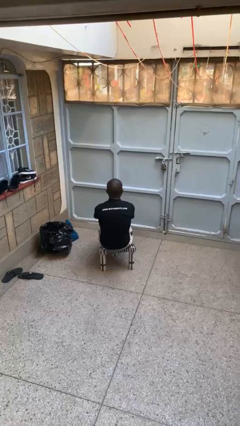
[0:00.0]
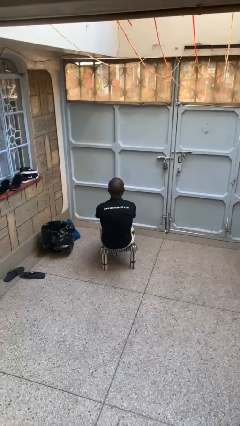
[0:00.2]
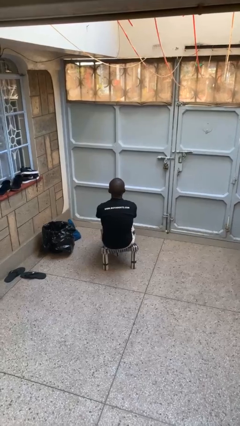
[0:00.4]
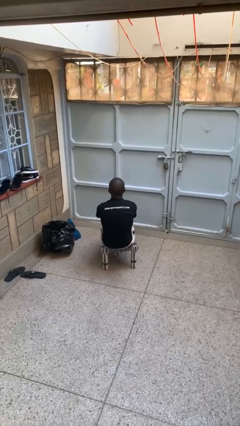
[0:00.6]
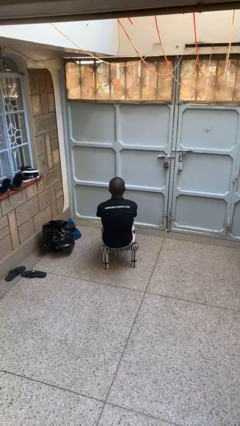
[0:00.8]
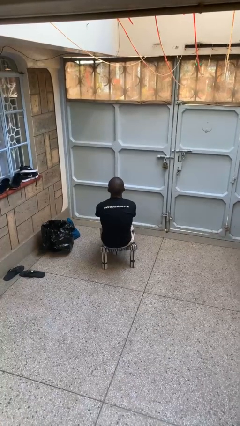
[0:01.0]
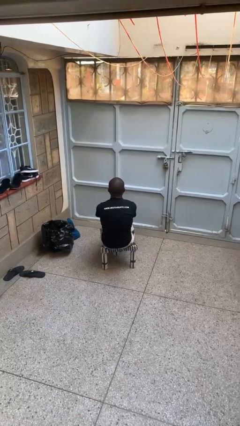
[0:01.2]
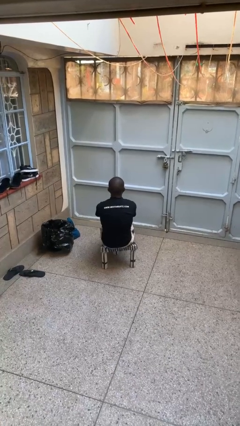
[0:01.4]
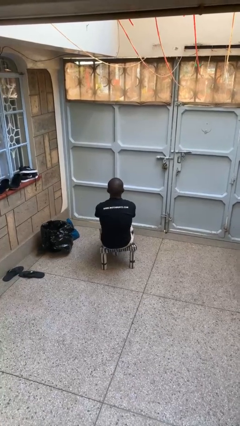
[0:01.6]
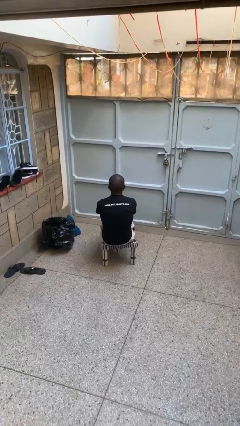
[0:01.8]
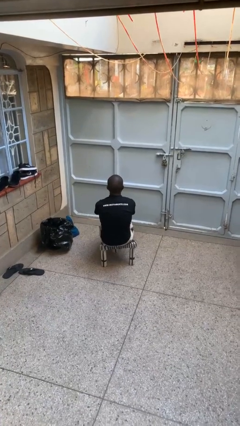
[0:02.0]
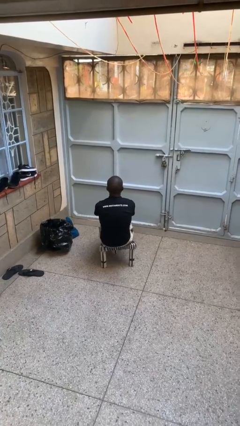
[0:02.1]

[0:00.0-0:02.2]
person nods head

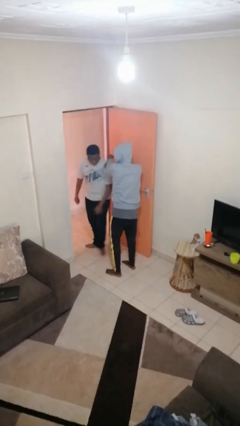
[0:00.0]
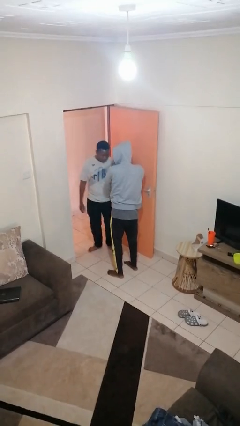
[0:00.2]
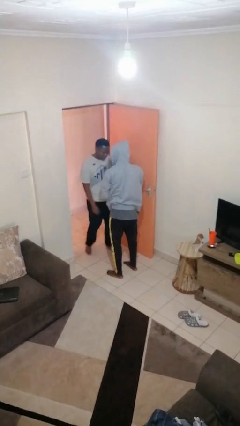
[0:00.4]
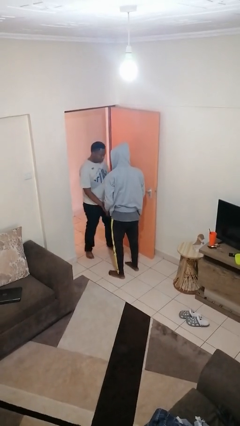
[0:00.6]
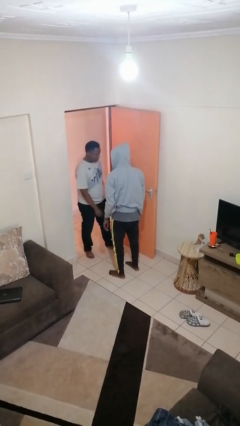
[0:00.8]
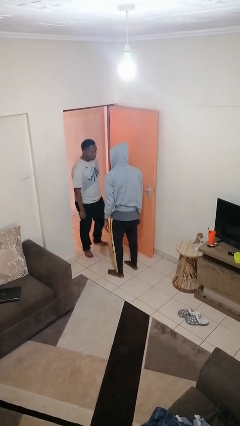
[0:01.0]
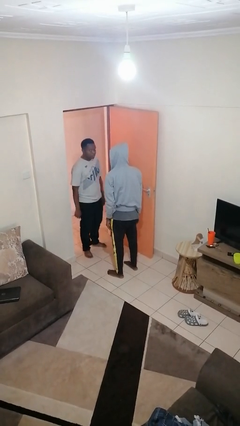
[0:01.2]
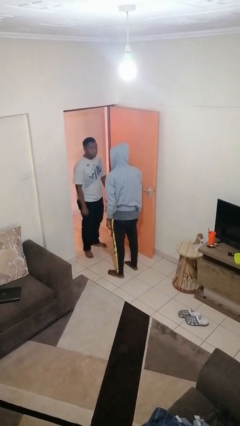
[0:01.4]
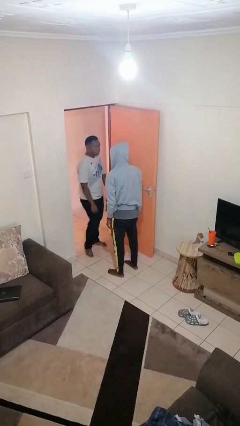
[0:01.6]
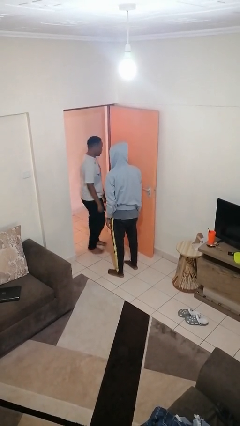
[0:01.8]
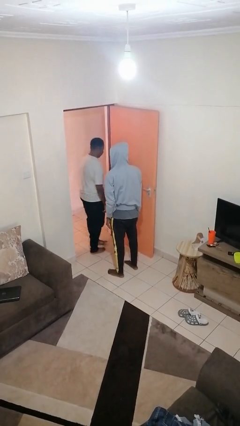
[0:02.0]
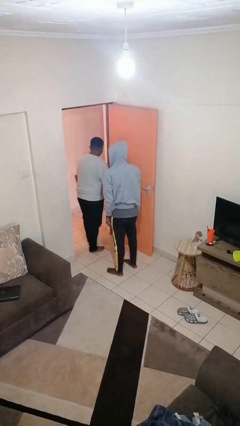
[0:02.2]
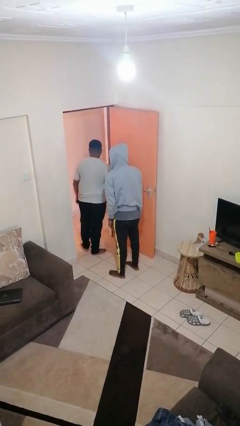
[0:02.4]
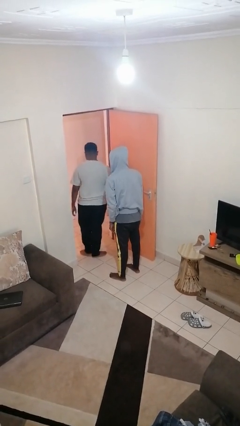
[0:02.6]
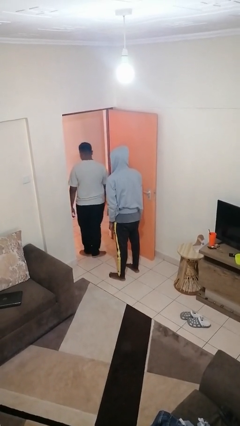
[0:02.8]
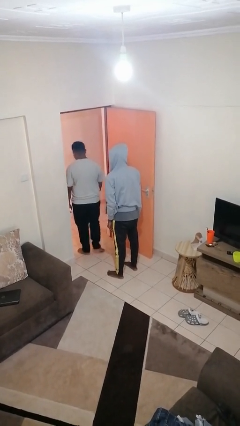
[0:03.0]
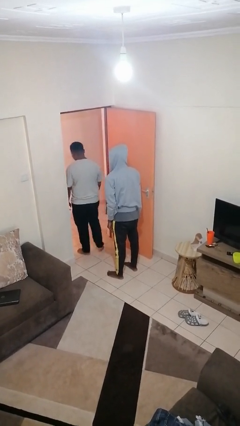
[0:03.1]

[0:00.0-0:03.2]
person spins person around

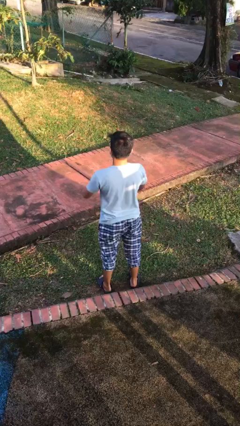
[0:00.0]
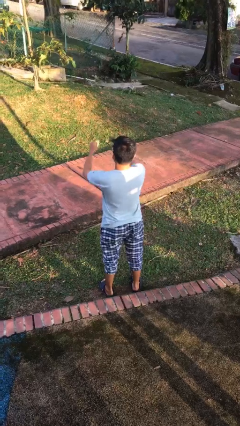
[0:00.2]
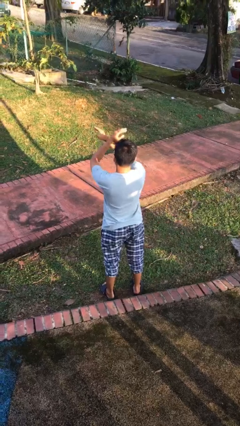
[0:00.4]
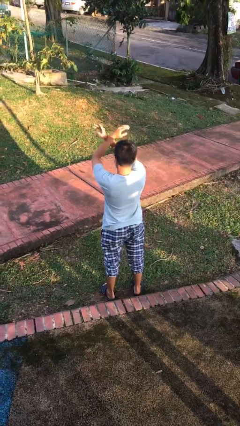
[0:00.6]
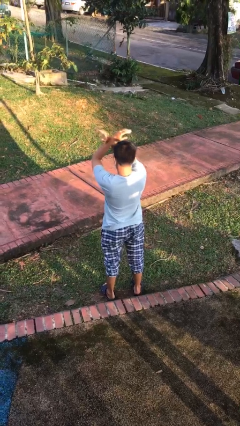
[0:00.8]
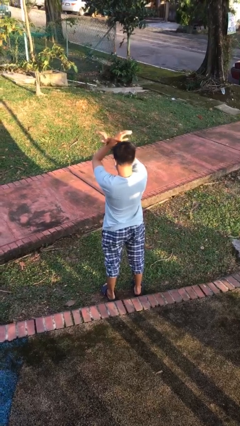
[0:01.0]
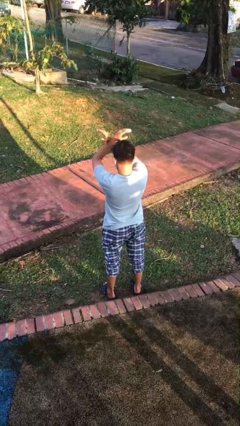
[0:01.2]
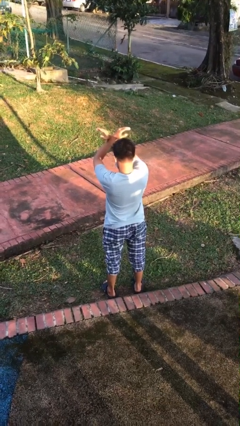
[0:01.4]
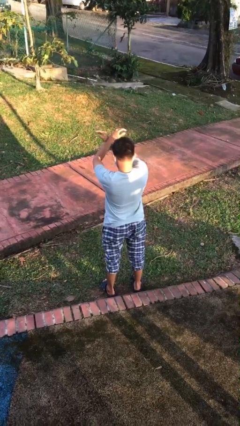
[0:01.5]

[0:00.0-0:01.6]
person gestures arms x

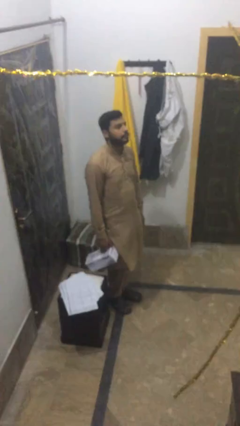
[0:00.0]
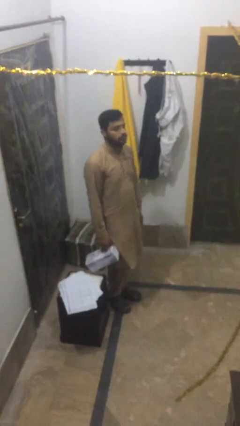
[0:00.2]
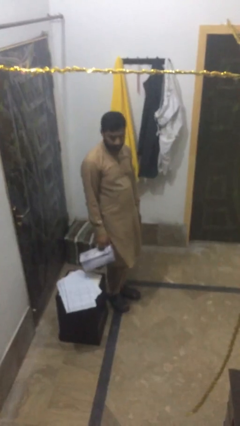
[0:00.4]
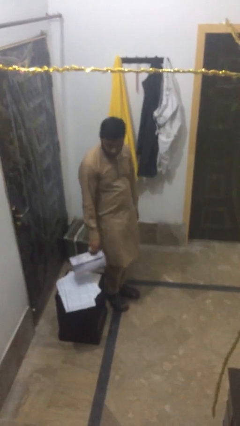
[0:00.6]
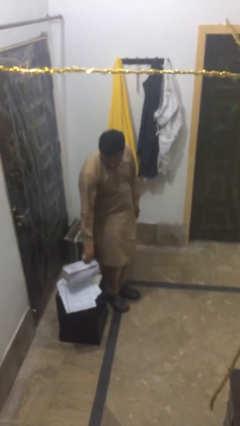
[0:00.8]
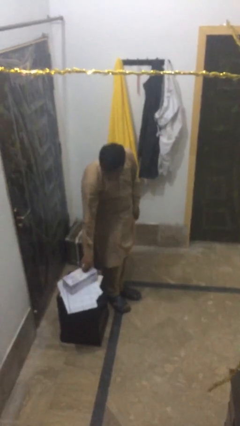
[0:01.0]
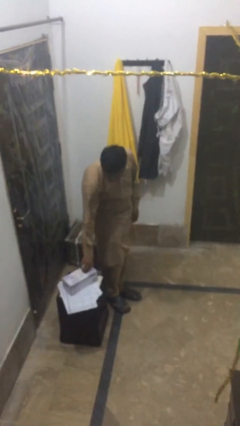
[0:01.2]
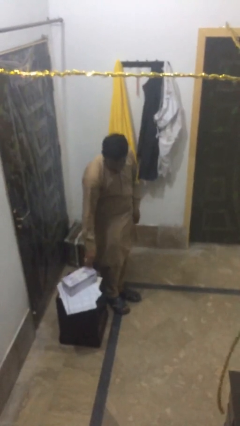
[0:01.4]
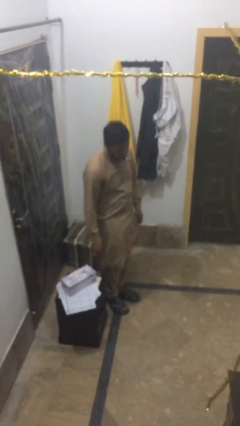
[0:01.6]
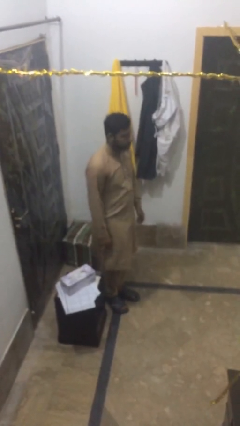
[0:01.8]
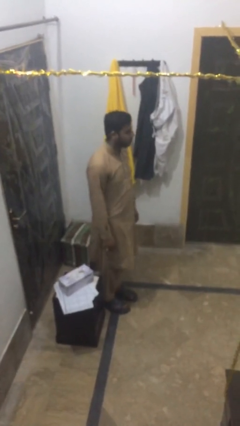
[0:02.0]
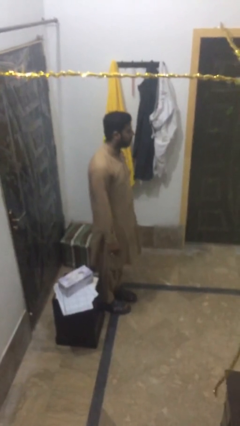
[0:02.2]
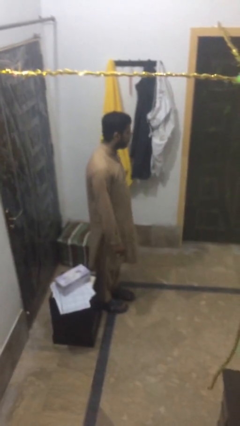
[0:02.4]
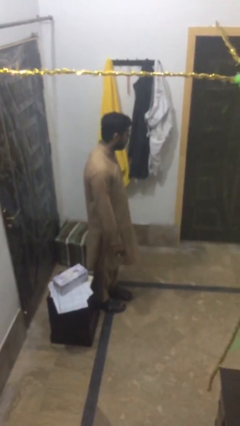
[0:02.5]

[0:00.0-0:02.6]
person puts down object on table

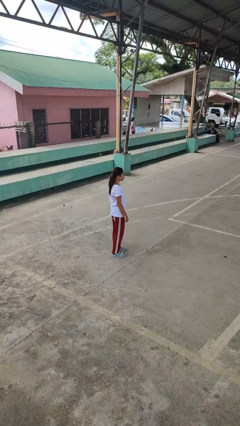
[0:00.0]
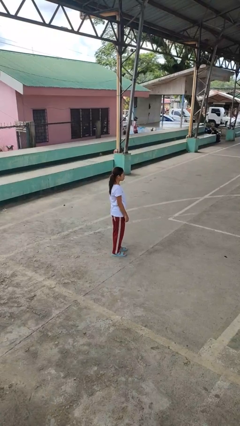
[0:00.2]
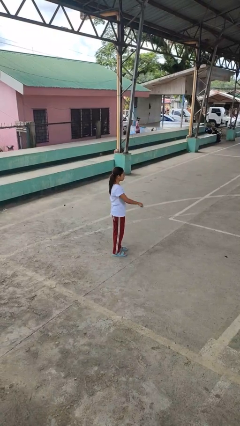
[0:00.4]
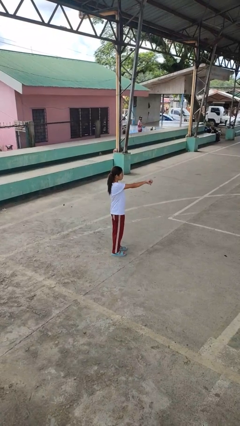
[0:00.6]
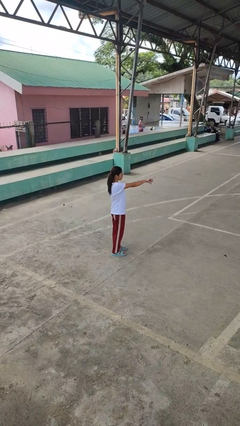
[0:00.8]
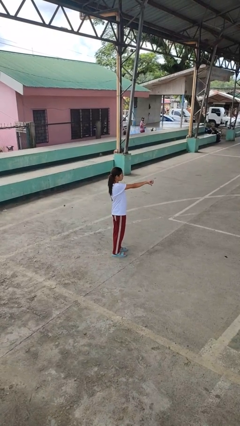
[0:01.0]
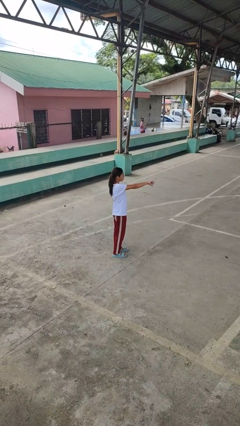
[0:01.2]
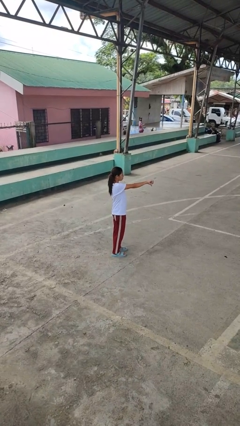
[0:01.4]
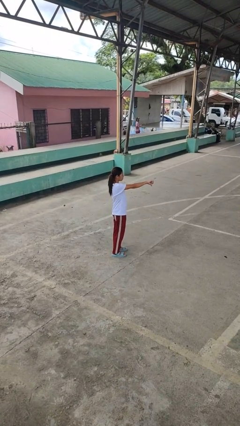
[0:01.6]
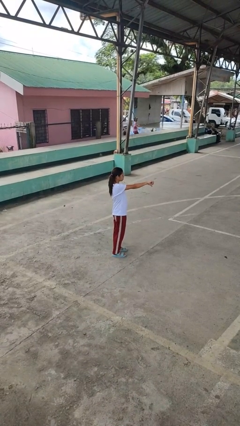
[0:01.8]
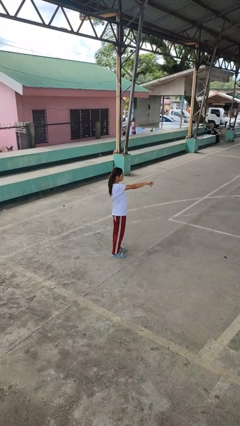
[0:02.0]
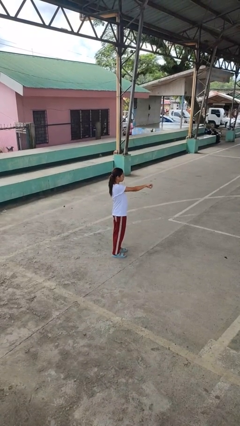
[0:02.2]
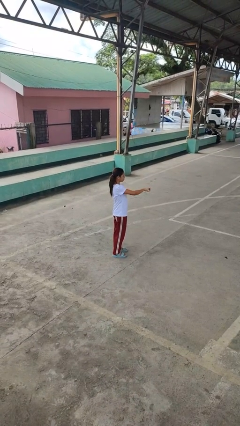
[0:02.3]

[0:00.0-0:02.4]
person gestures thumbs down

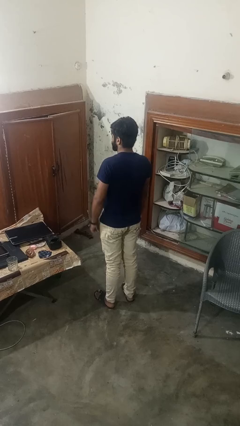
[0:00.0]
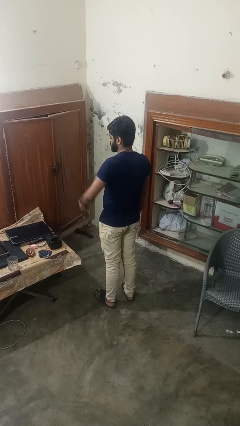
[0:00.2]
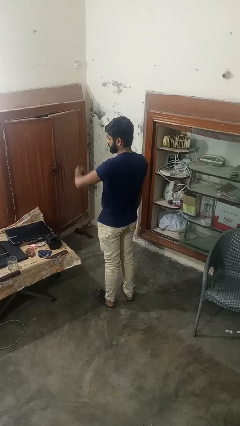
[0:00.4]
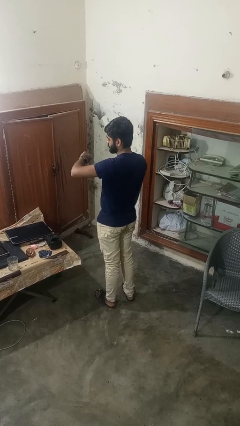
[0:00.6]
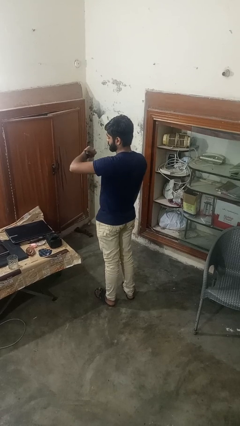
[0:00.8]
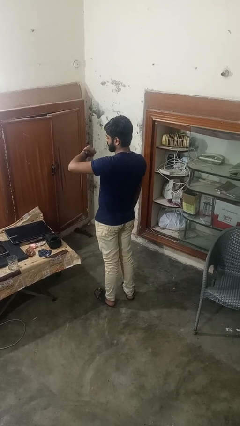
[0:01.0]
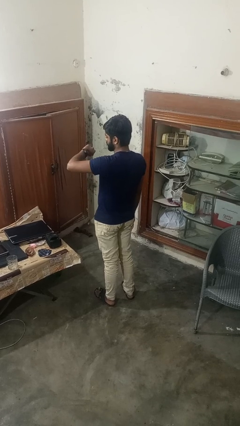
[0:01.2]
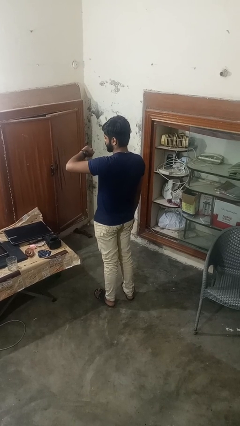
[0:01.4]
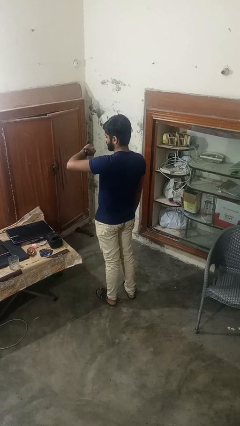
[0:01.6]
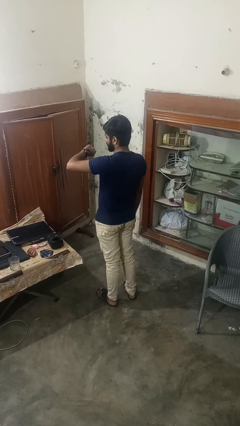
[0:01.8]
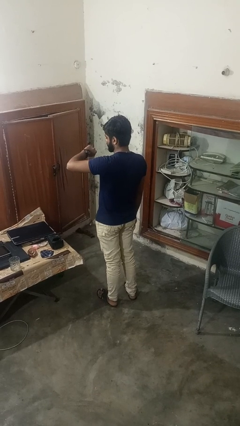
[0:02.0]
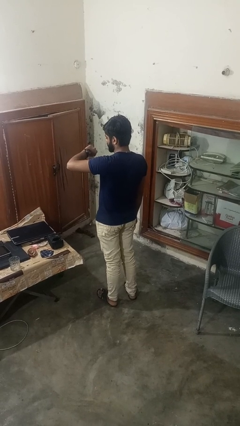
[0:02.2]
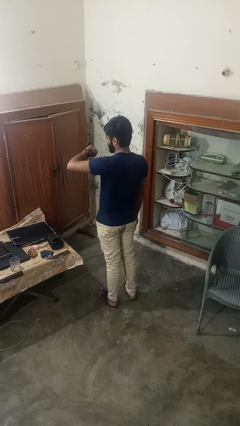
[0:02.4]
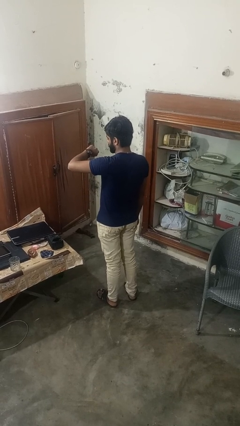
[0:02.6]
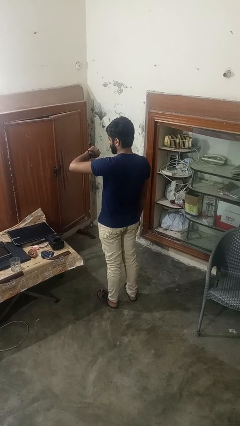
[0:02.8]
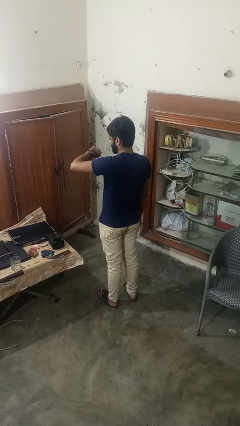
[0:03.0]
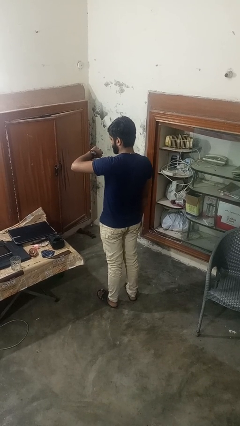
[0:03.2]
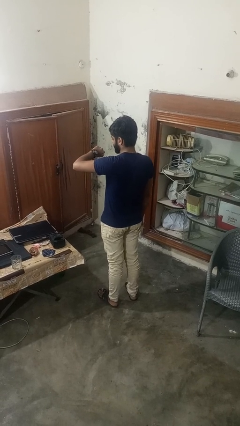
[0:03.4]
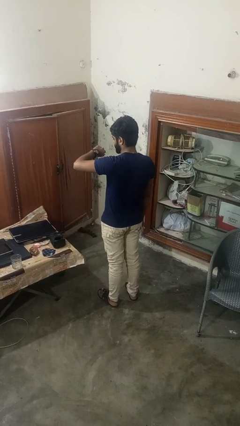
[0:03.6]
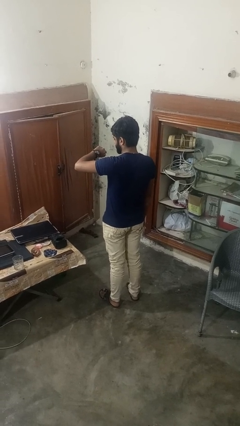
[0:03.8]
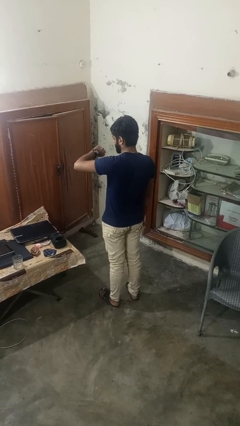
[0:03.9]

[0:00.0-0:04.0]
person looks at wristwatch

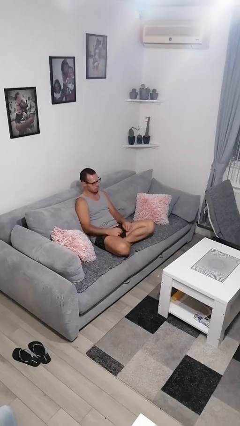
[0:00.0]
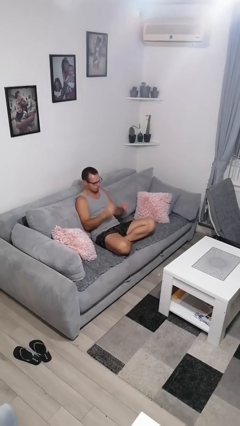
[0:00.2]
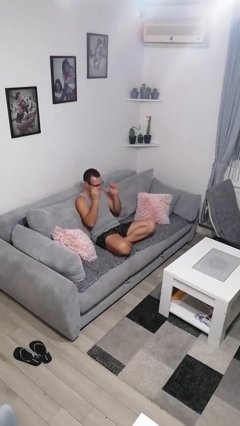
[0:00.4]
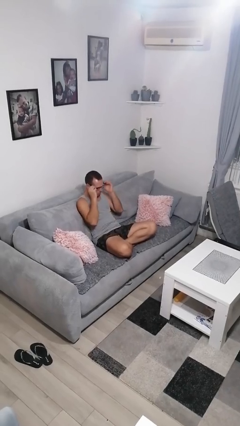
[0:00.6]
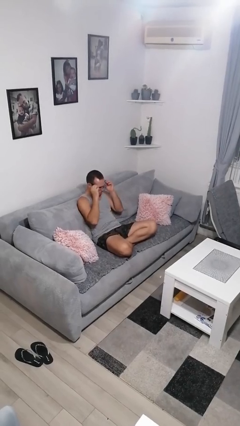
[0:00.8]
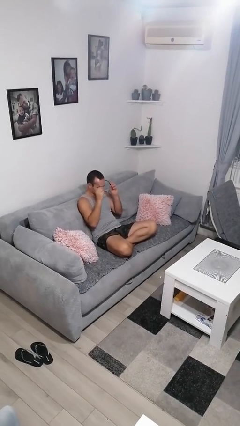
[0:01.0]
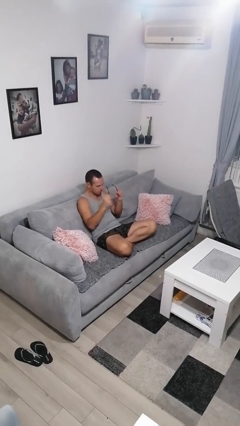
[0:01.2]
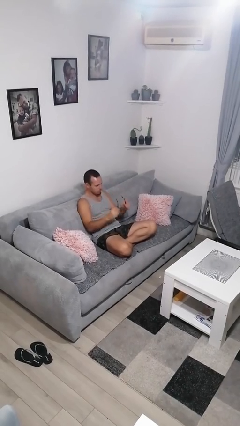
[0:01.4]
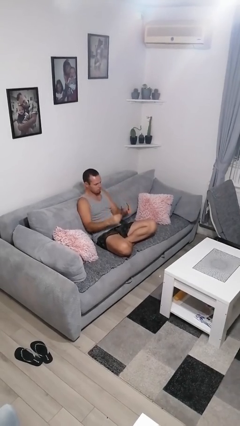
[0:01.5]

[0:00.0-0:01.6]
person takes off glasses
